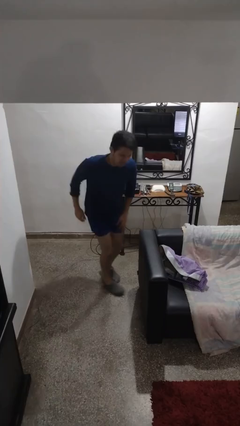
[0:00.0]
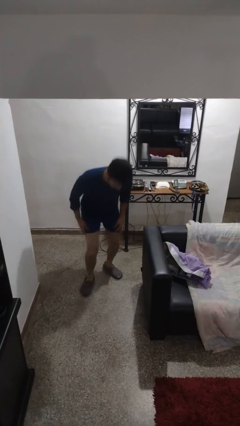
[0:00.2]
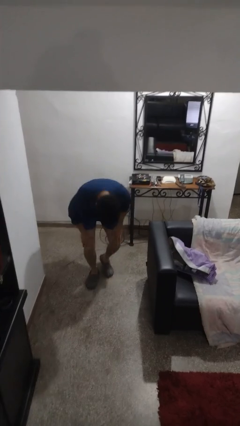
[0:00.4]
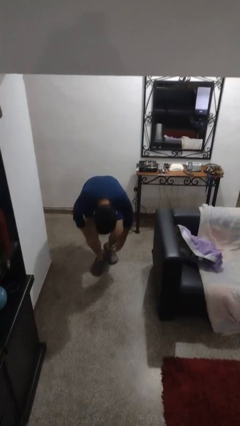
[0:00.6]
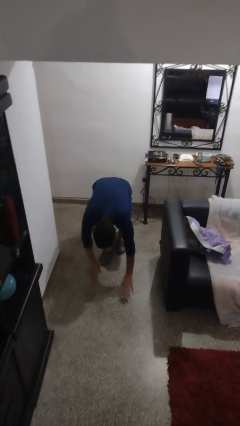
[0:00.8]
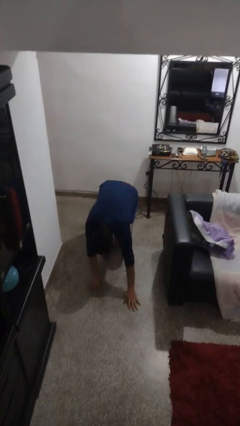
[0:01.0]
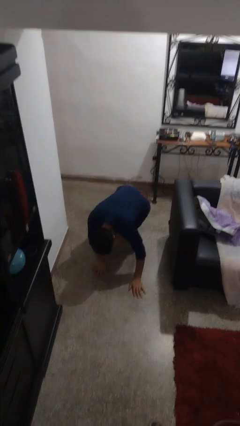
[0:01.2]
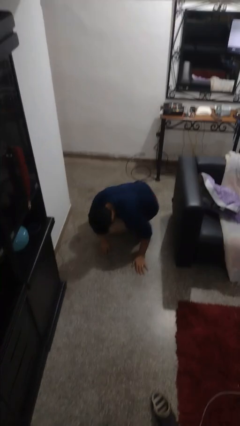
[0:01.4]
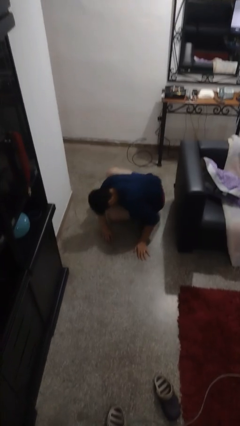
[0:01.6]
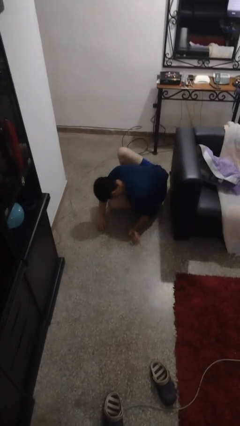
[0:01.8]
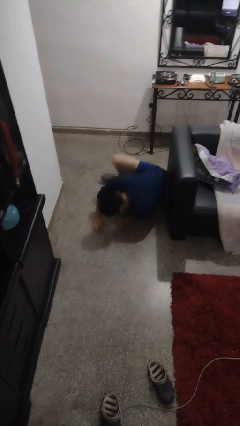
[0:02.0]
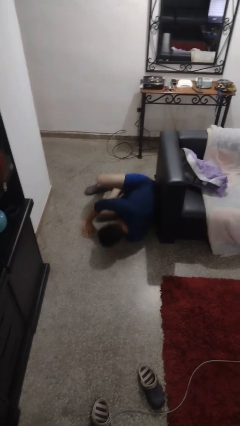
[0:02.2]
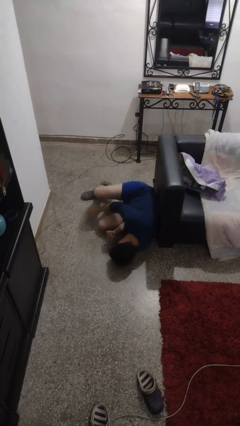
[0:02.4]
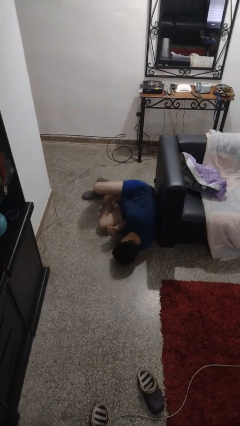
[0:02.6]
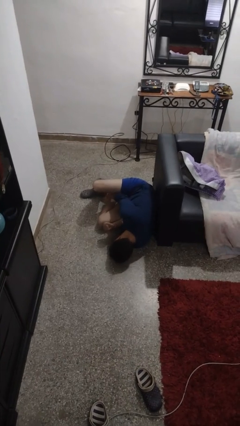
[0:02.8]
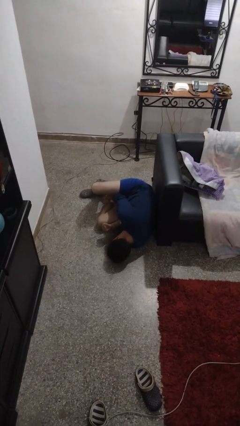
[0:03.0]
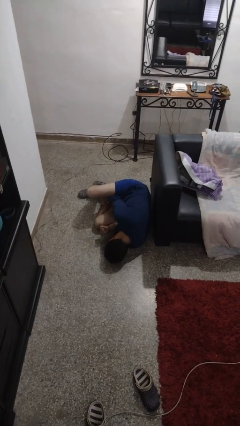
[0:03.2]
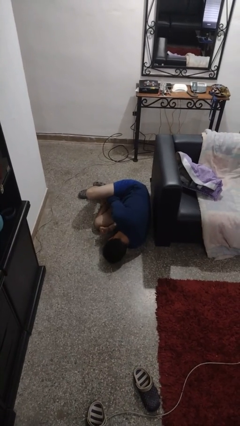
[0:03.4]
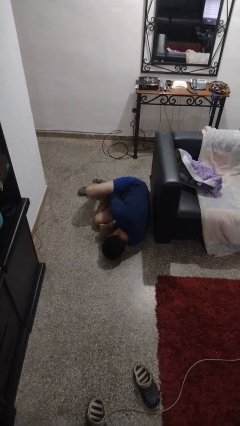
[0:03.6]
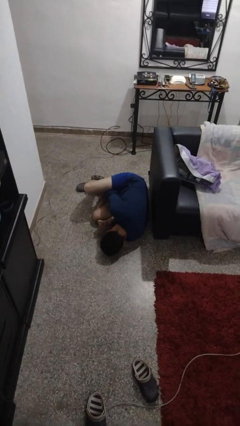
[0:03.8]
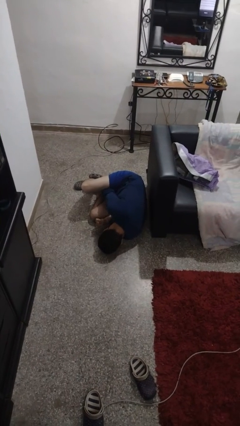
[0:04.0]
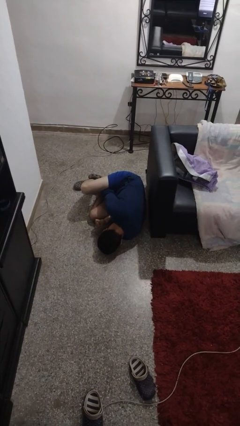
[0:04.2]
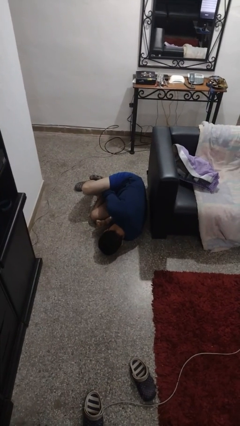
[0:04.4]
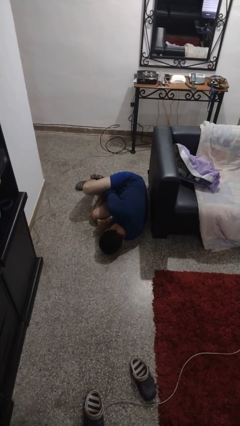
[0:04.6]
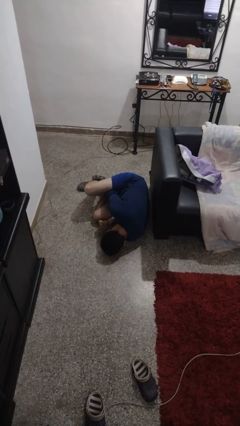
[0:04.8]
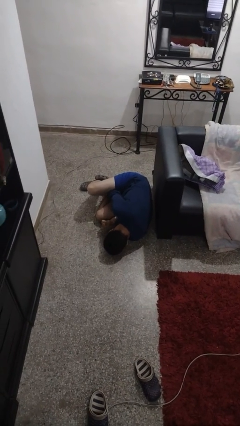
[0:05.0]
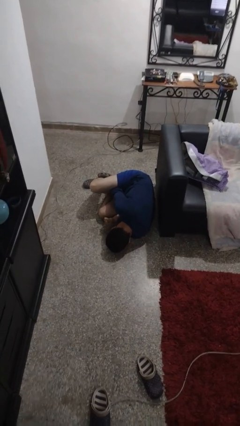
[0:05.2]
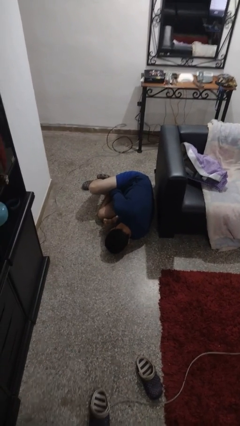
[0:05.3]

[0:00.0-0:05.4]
person lies down on floor

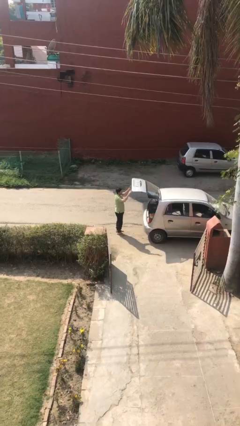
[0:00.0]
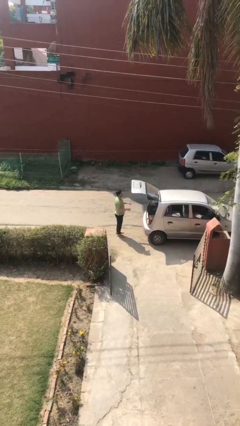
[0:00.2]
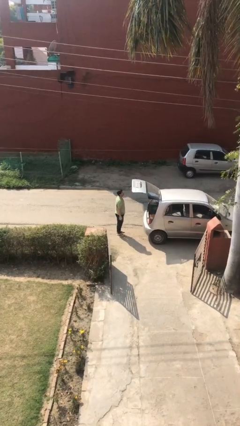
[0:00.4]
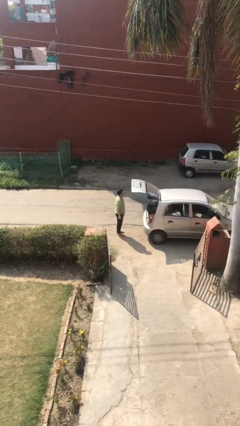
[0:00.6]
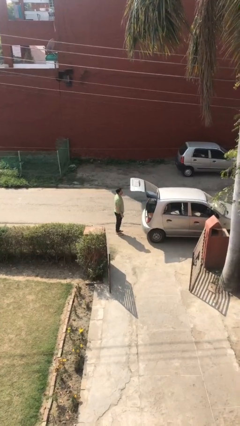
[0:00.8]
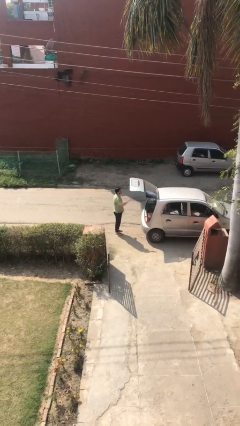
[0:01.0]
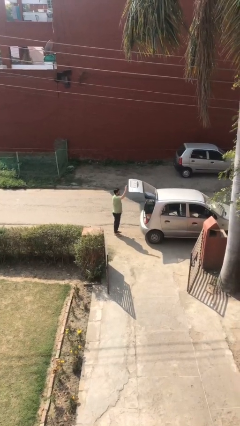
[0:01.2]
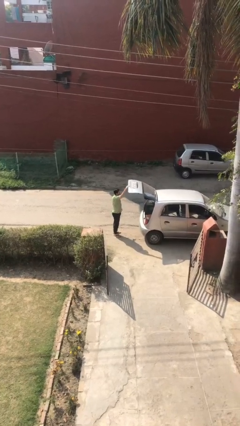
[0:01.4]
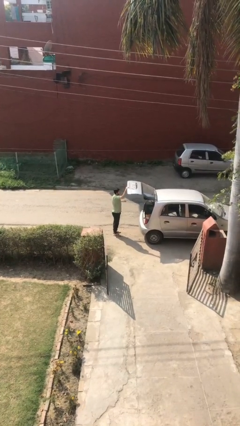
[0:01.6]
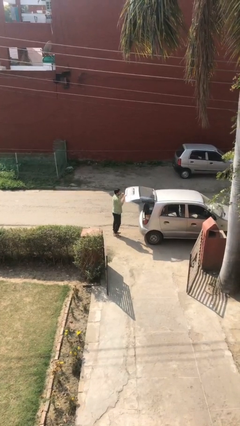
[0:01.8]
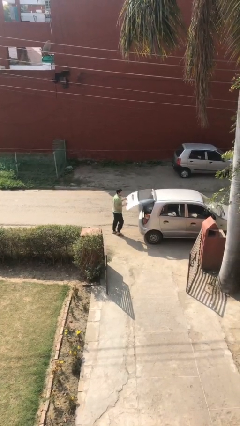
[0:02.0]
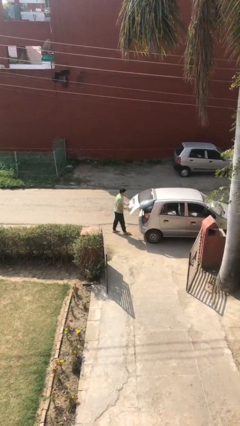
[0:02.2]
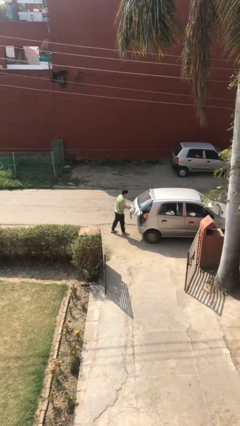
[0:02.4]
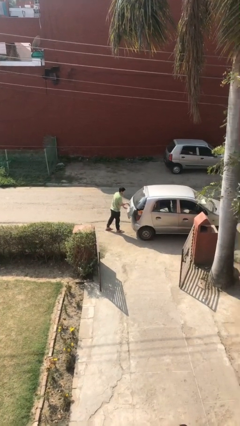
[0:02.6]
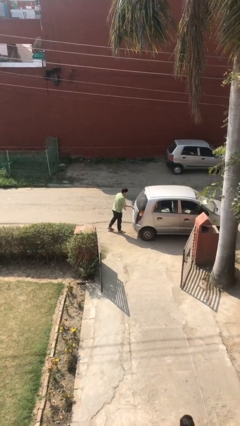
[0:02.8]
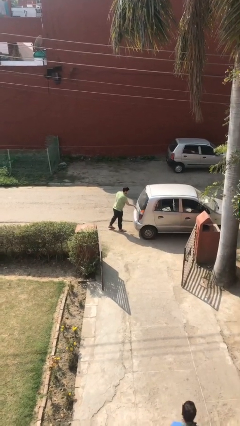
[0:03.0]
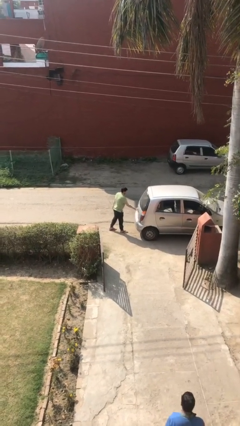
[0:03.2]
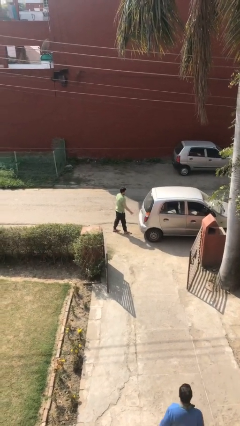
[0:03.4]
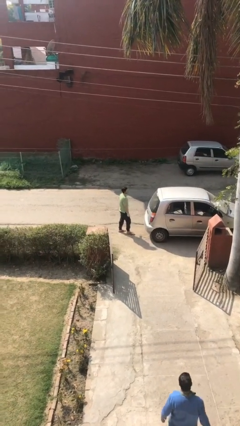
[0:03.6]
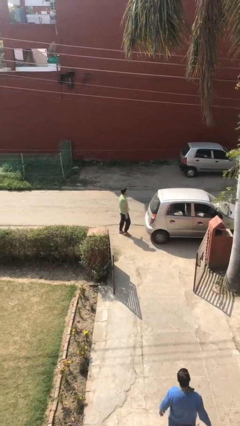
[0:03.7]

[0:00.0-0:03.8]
person closes car trunk

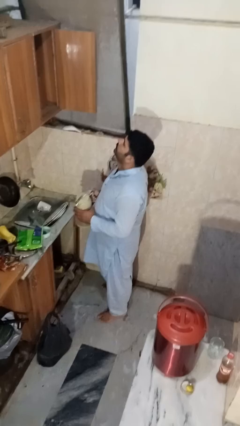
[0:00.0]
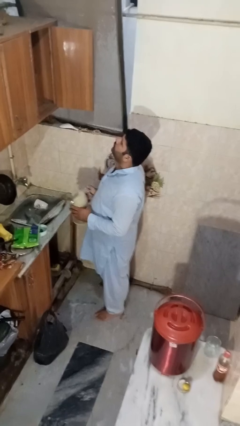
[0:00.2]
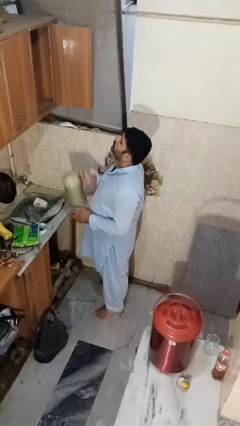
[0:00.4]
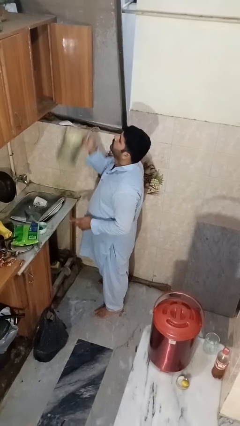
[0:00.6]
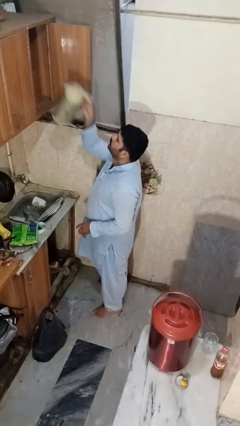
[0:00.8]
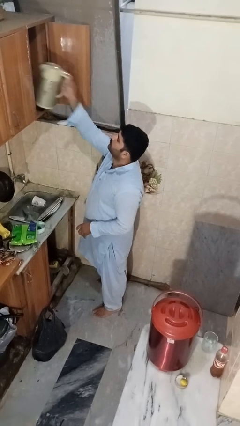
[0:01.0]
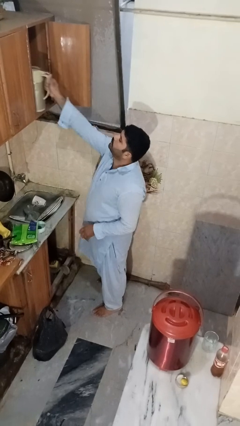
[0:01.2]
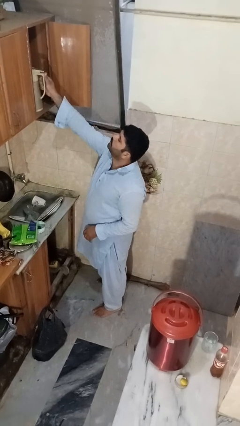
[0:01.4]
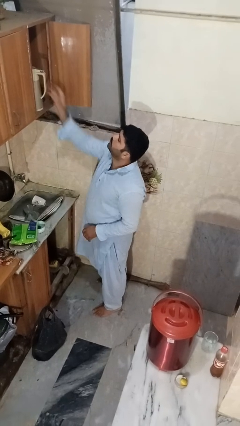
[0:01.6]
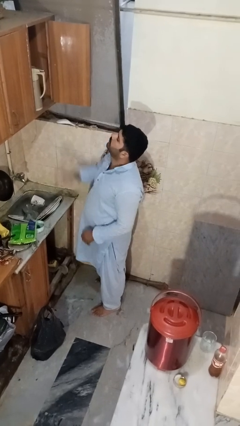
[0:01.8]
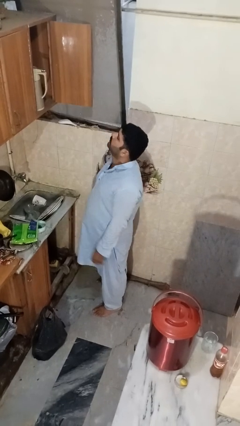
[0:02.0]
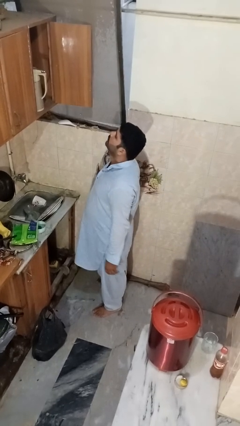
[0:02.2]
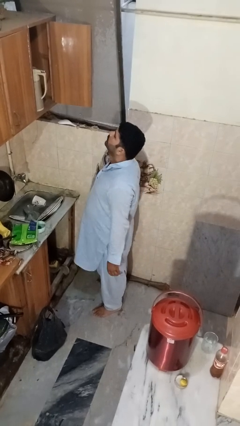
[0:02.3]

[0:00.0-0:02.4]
person puts object in cabinet

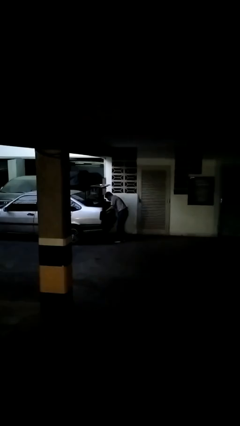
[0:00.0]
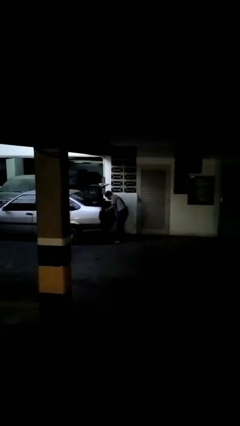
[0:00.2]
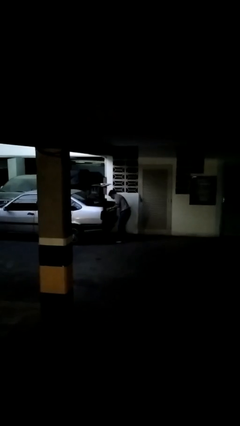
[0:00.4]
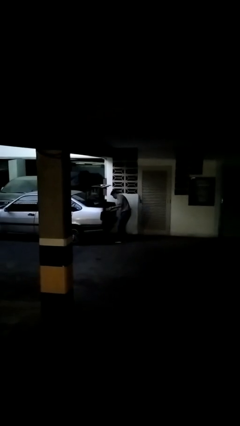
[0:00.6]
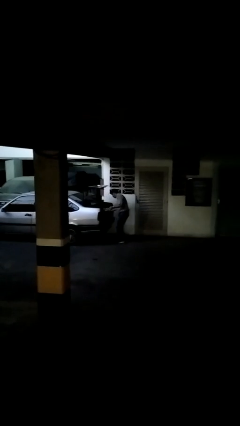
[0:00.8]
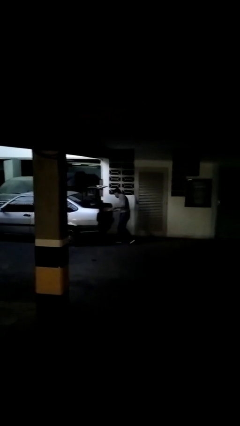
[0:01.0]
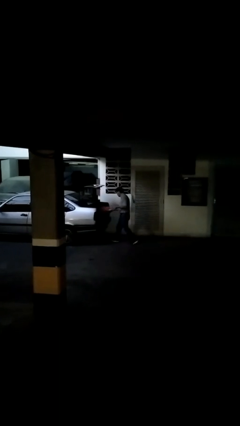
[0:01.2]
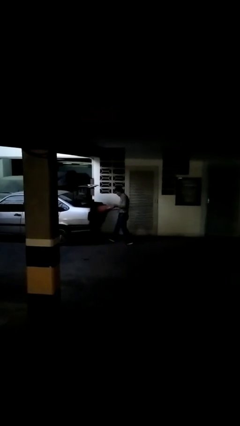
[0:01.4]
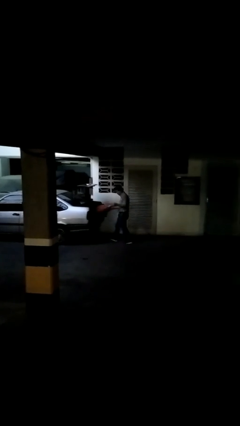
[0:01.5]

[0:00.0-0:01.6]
person unloads car

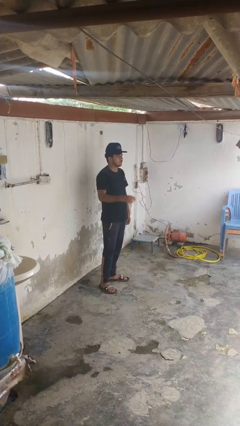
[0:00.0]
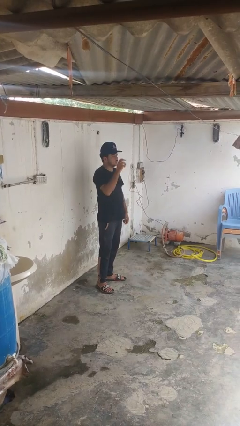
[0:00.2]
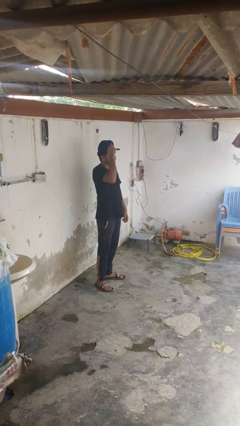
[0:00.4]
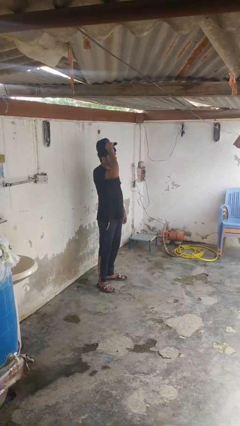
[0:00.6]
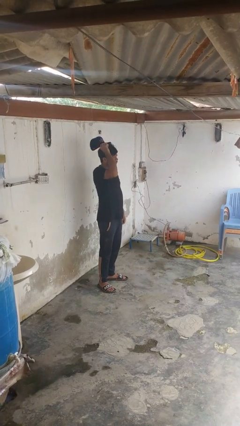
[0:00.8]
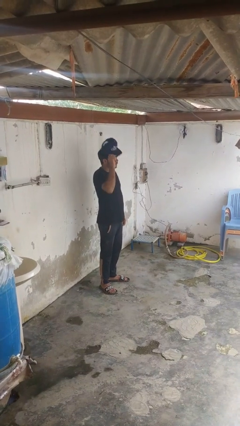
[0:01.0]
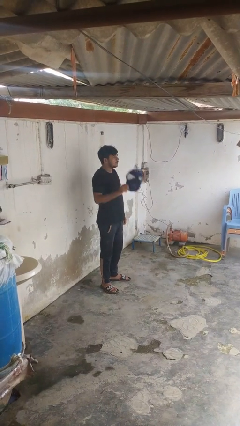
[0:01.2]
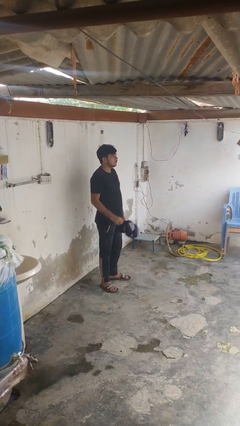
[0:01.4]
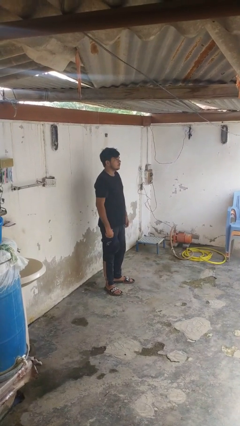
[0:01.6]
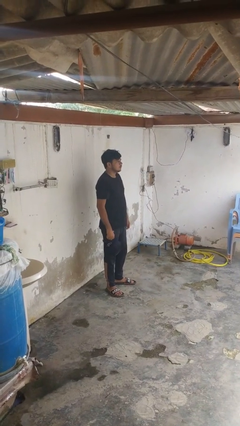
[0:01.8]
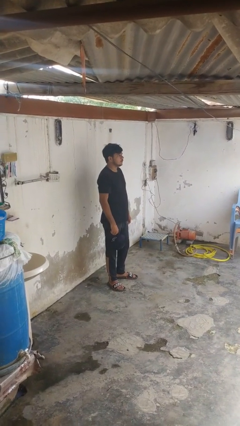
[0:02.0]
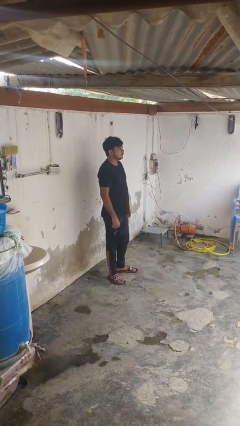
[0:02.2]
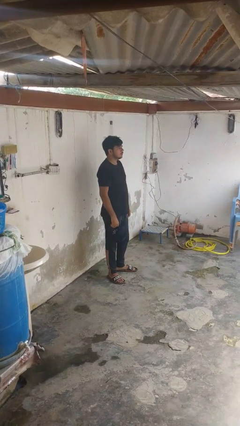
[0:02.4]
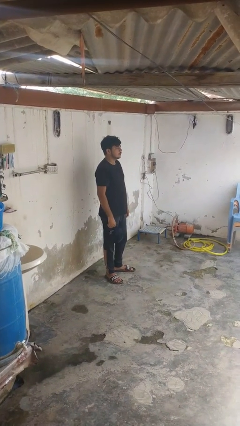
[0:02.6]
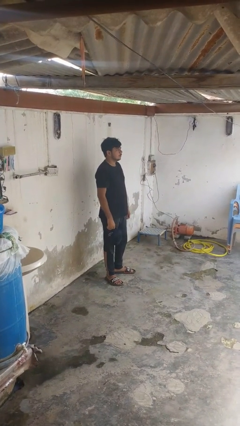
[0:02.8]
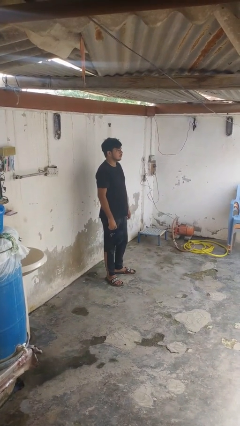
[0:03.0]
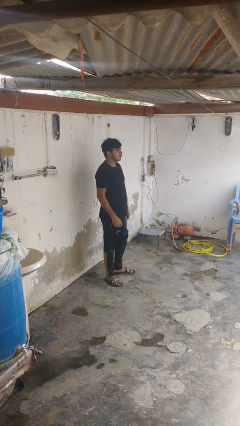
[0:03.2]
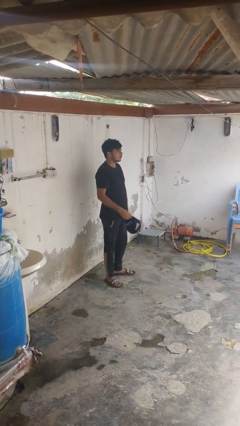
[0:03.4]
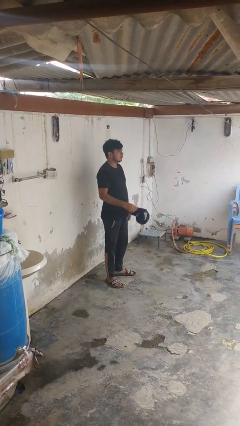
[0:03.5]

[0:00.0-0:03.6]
person takes off hat

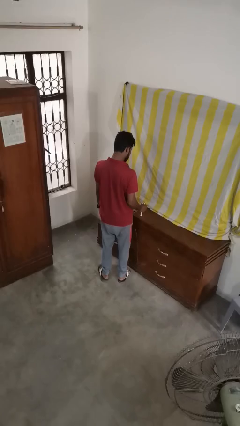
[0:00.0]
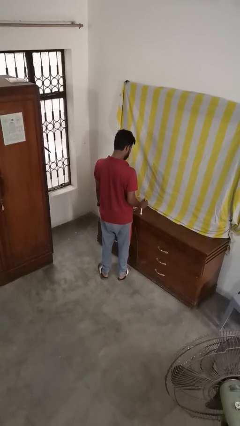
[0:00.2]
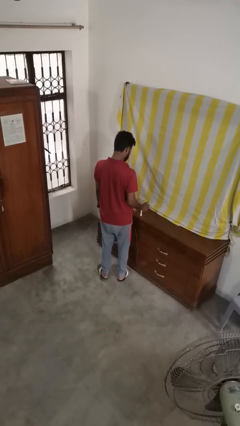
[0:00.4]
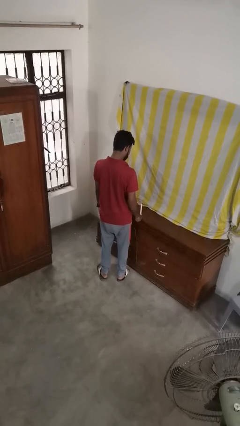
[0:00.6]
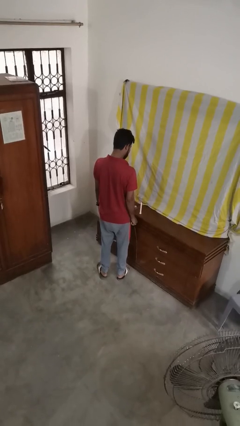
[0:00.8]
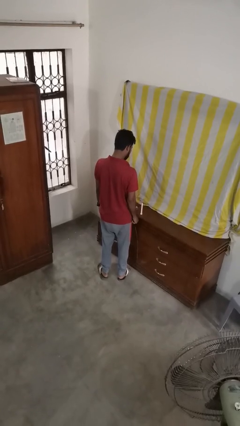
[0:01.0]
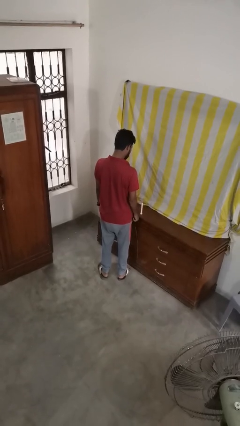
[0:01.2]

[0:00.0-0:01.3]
person extinguishes candle
